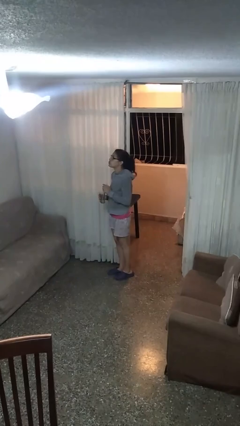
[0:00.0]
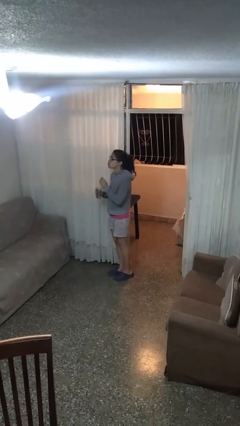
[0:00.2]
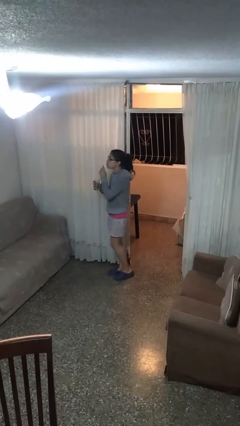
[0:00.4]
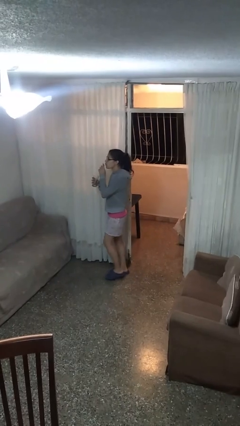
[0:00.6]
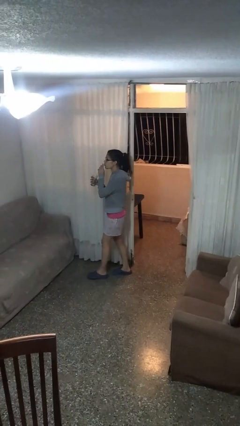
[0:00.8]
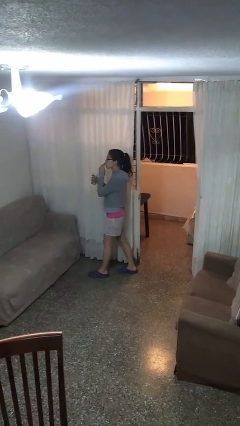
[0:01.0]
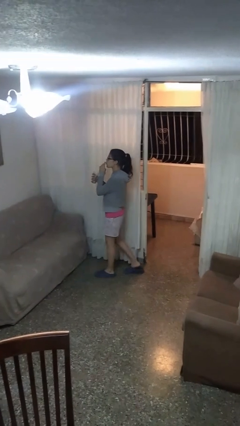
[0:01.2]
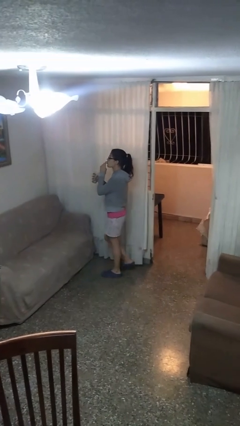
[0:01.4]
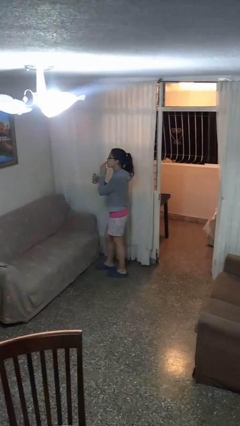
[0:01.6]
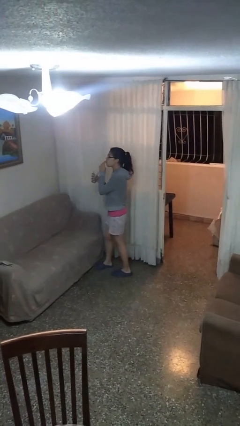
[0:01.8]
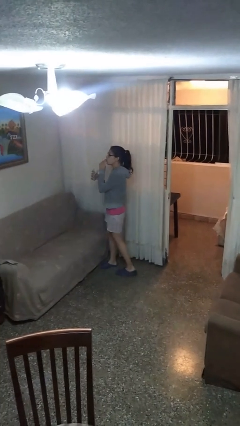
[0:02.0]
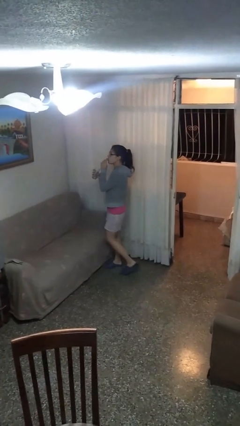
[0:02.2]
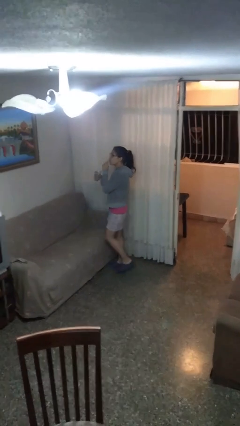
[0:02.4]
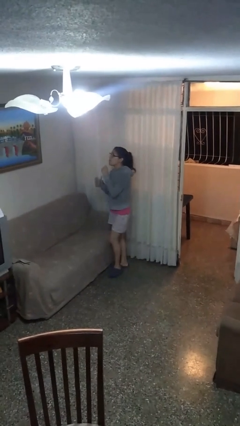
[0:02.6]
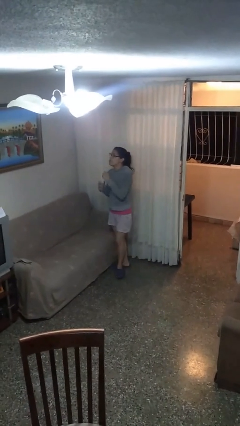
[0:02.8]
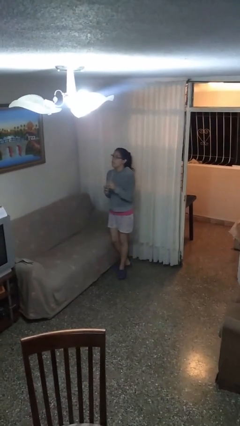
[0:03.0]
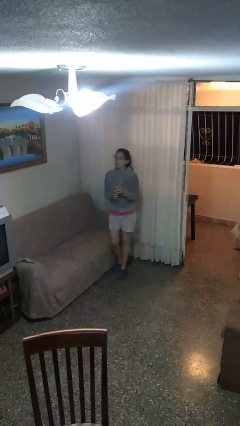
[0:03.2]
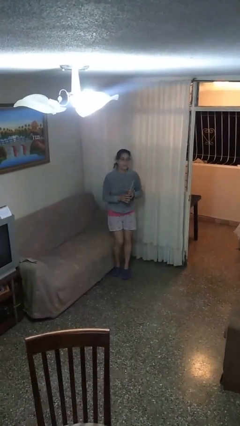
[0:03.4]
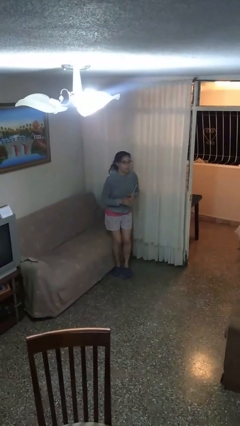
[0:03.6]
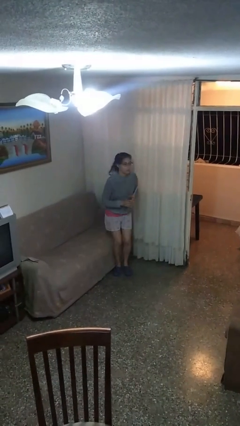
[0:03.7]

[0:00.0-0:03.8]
person drinks from straw

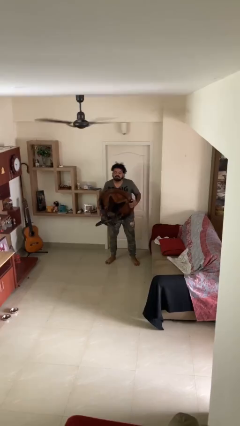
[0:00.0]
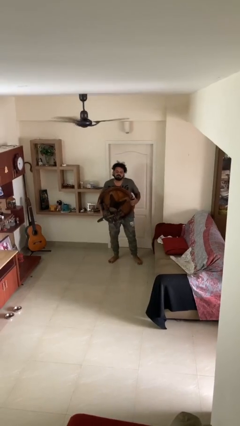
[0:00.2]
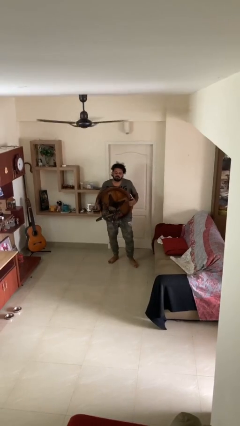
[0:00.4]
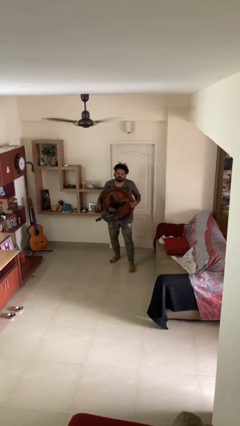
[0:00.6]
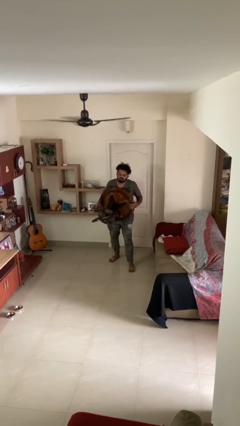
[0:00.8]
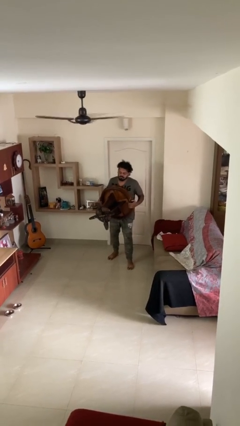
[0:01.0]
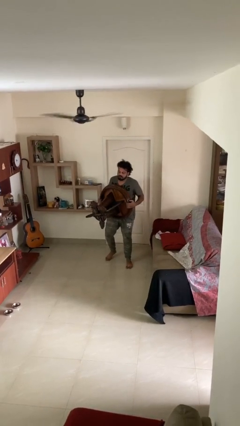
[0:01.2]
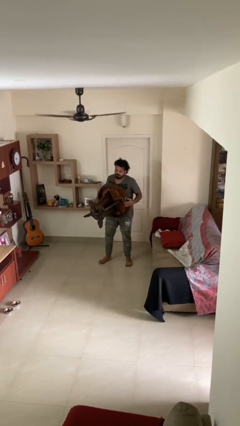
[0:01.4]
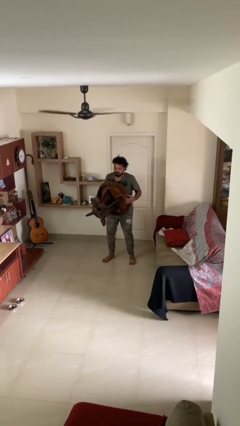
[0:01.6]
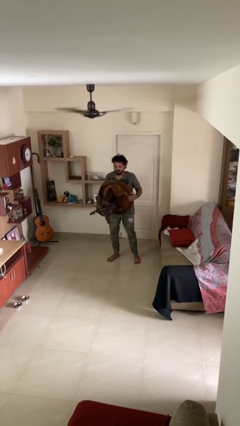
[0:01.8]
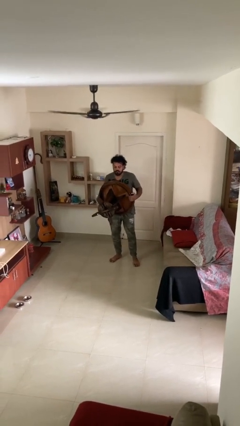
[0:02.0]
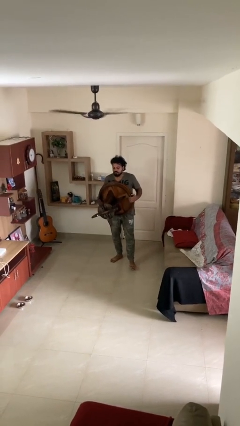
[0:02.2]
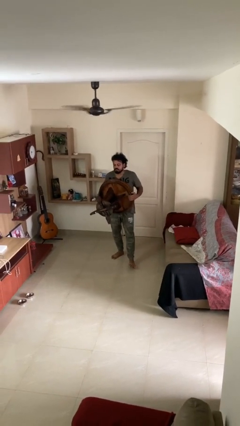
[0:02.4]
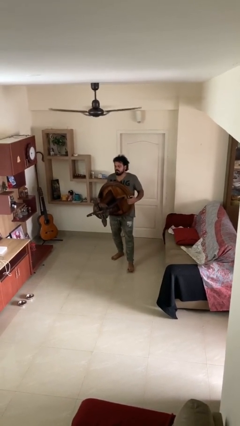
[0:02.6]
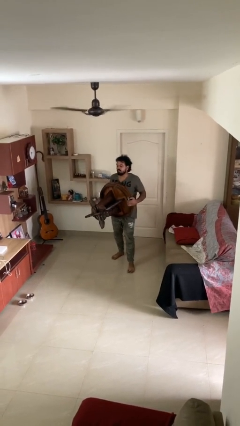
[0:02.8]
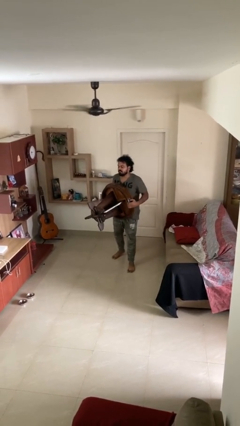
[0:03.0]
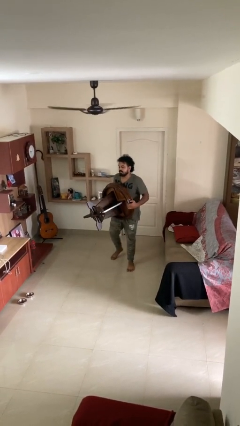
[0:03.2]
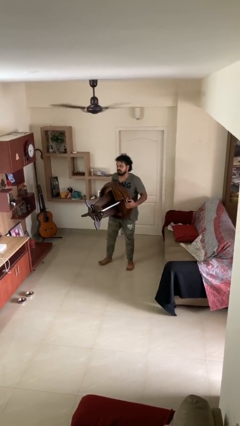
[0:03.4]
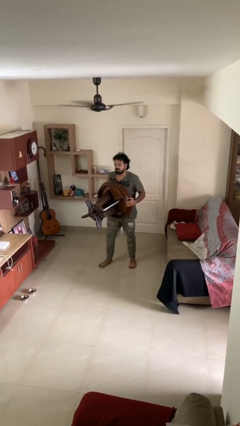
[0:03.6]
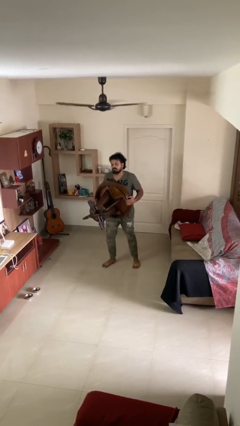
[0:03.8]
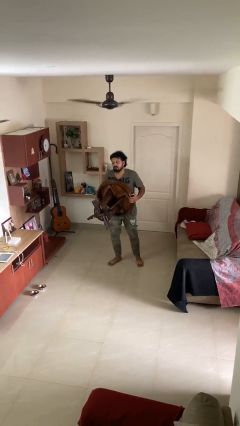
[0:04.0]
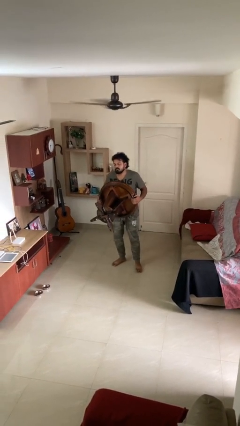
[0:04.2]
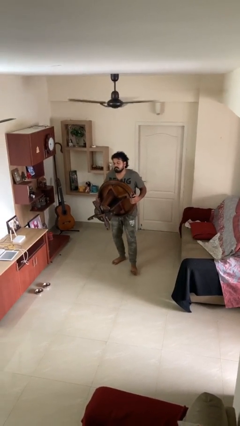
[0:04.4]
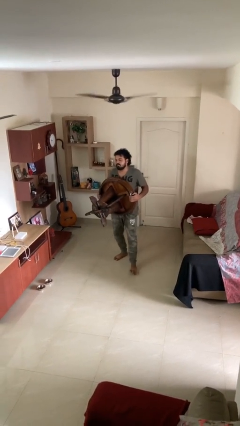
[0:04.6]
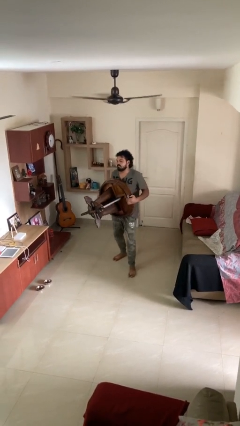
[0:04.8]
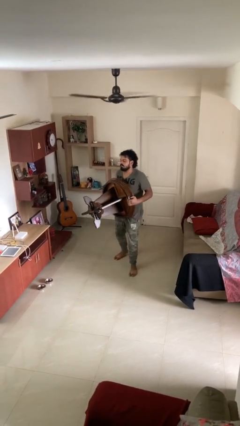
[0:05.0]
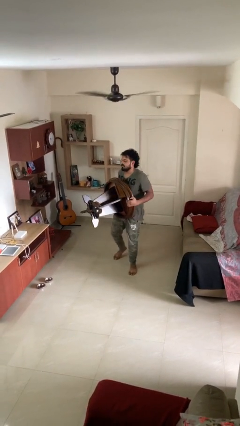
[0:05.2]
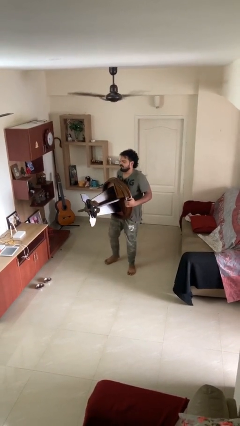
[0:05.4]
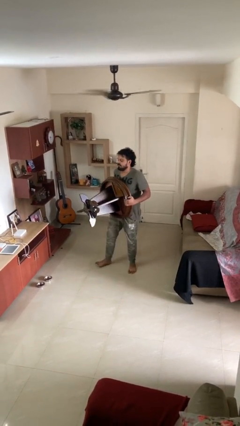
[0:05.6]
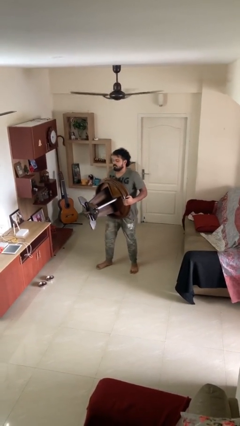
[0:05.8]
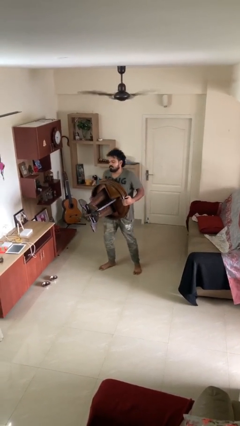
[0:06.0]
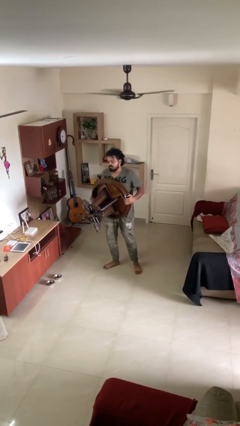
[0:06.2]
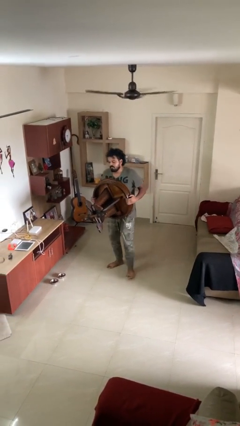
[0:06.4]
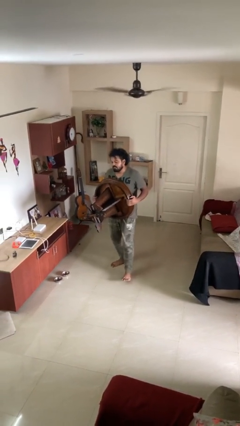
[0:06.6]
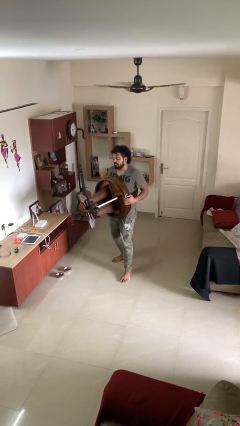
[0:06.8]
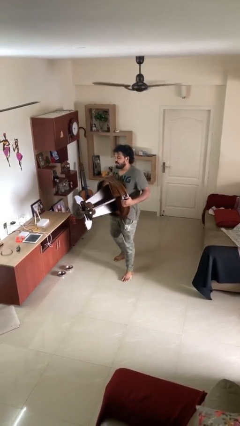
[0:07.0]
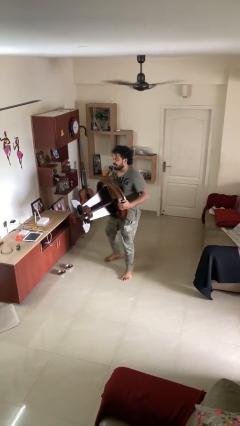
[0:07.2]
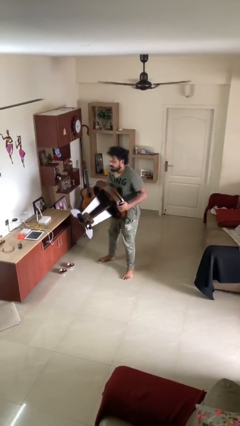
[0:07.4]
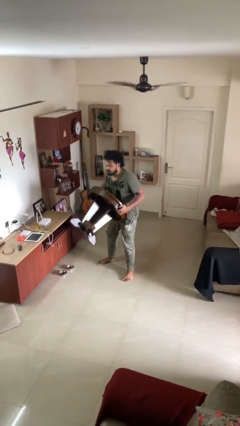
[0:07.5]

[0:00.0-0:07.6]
person carries heavy object

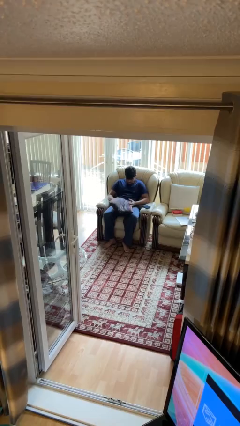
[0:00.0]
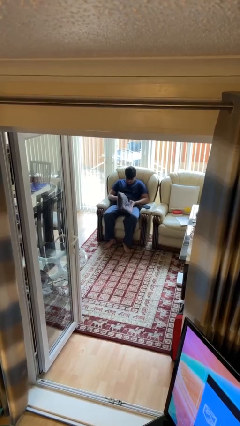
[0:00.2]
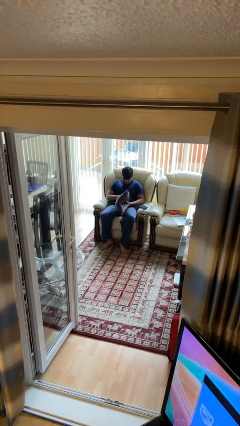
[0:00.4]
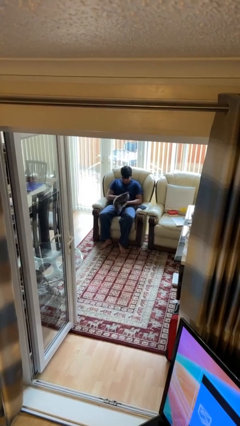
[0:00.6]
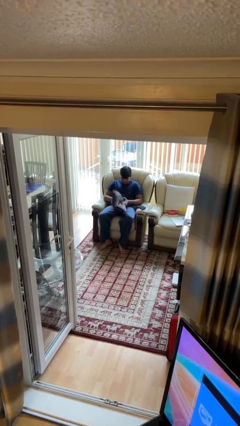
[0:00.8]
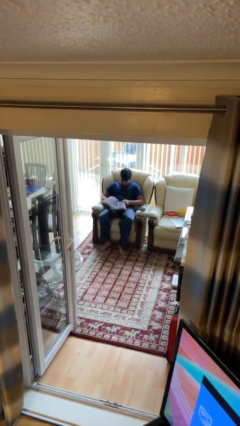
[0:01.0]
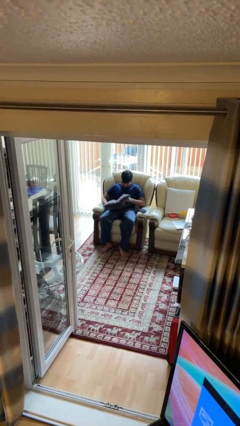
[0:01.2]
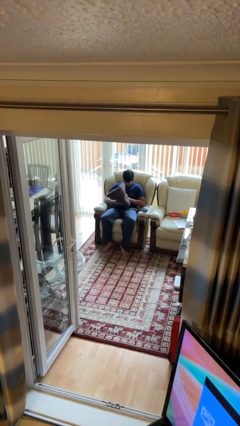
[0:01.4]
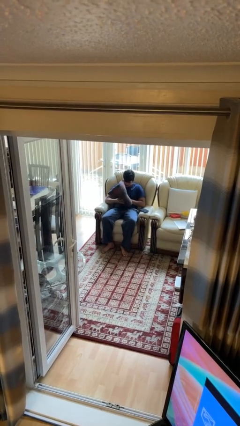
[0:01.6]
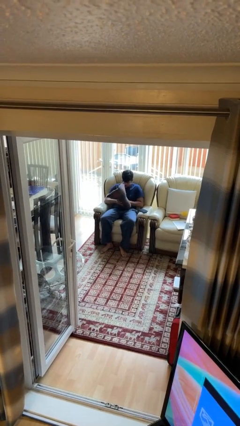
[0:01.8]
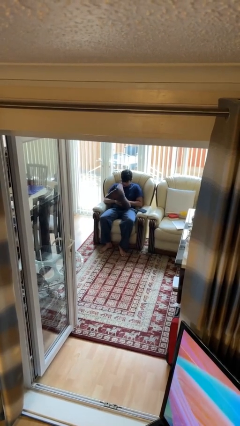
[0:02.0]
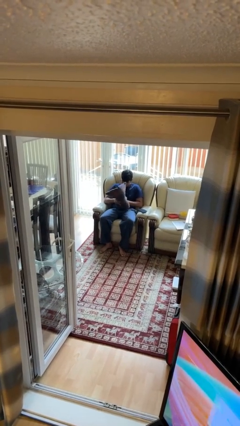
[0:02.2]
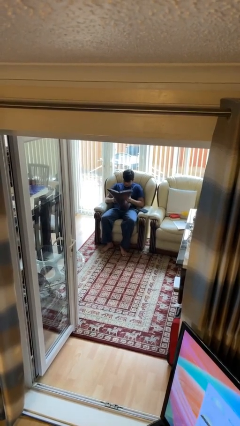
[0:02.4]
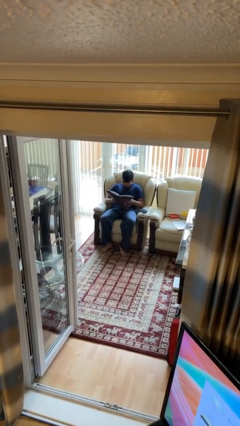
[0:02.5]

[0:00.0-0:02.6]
person squeezes object

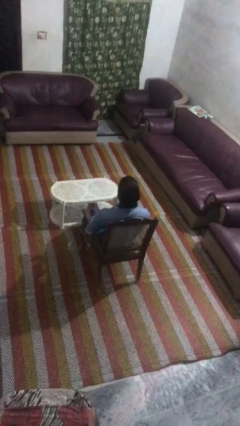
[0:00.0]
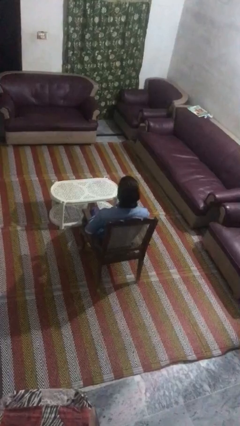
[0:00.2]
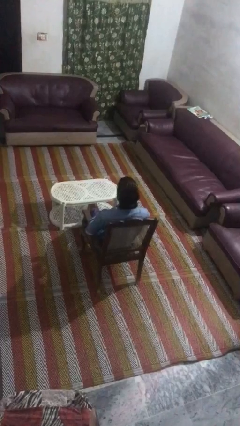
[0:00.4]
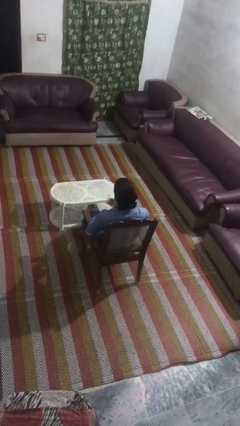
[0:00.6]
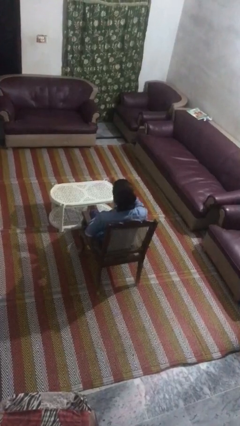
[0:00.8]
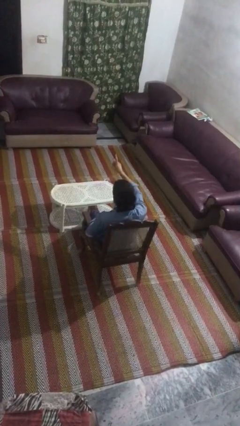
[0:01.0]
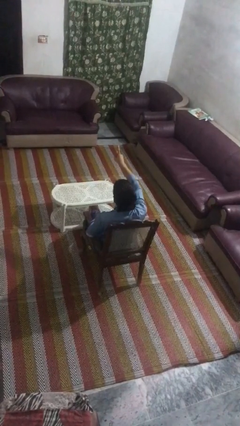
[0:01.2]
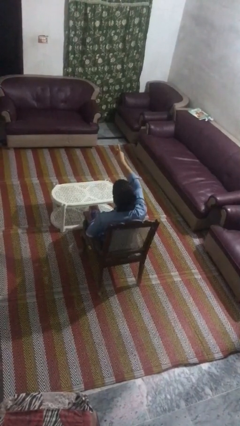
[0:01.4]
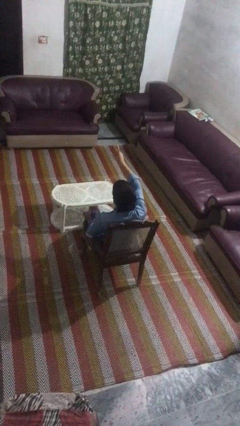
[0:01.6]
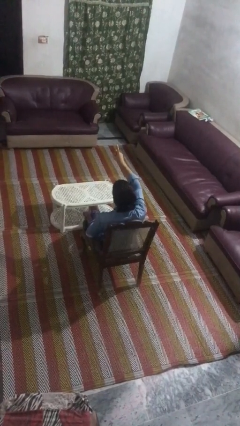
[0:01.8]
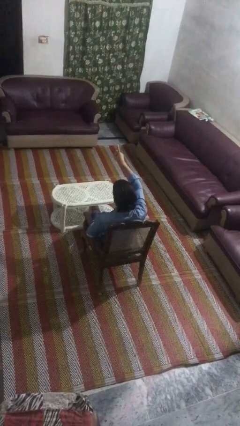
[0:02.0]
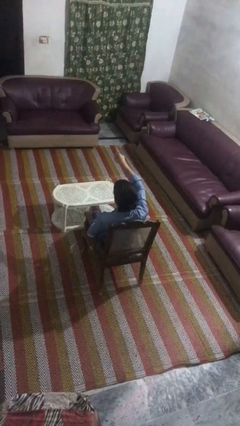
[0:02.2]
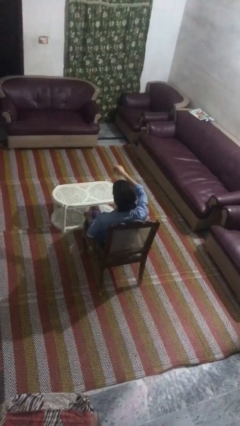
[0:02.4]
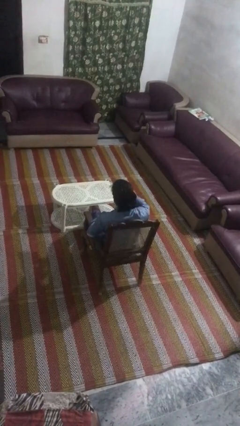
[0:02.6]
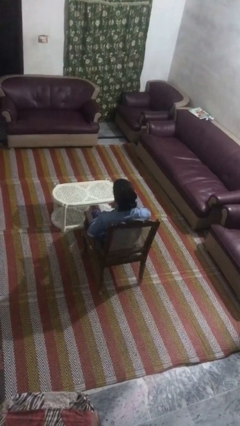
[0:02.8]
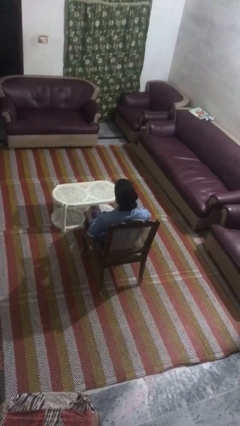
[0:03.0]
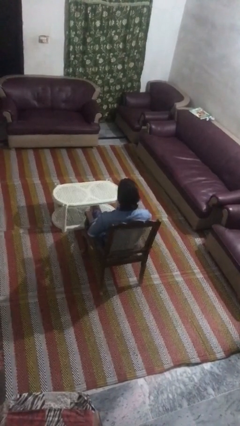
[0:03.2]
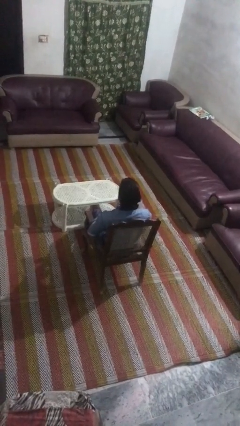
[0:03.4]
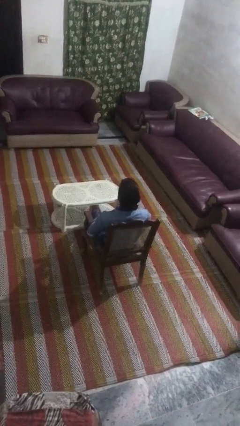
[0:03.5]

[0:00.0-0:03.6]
person gestures number one

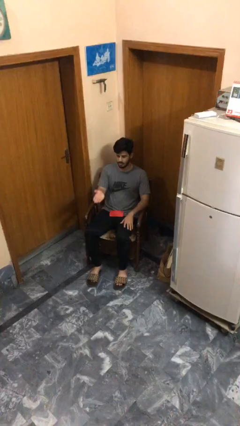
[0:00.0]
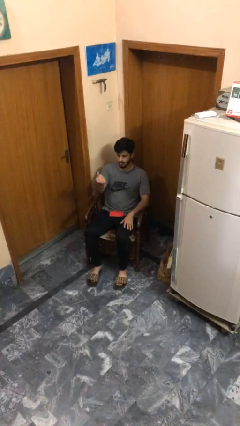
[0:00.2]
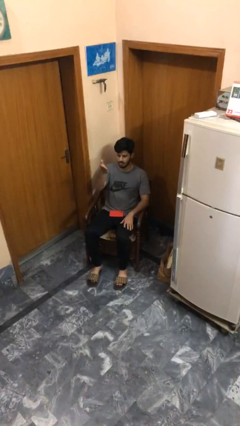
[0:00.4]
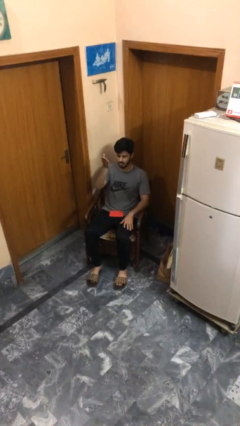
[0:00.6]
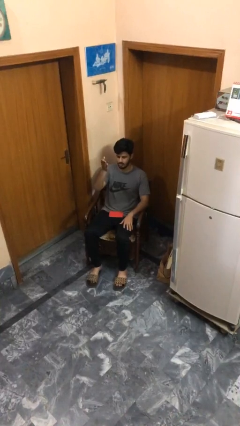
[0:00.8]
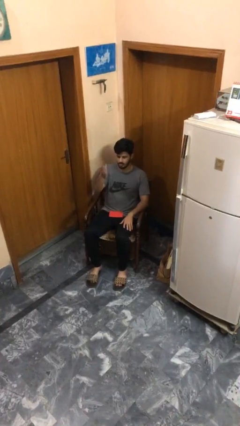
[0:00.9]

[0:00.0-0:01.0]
person gestures swipe up
